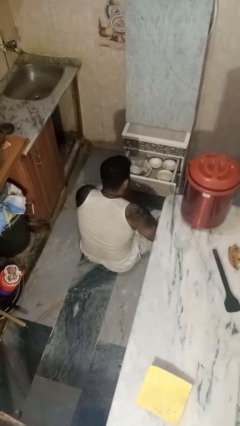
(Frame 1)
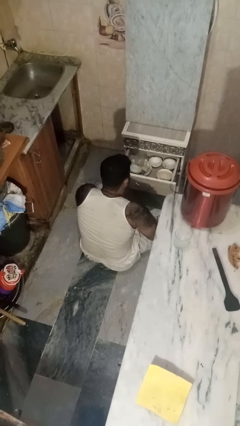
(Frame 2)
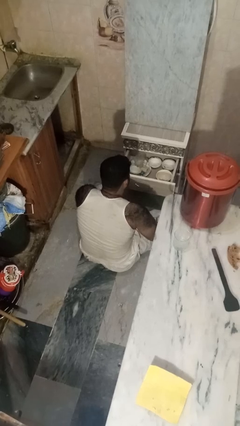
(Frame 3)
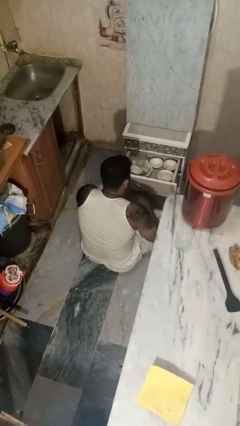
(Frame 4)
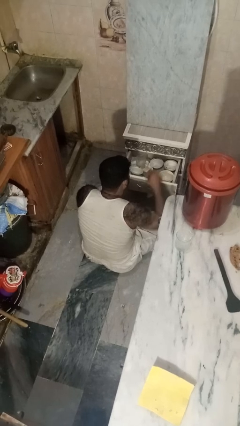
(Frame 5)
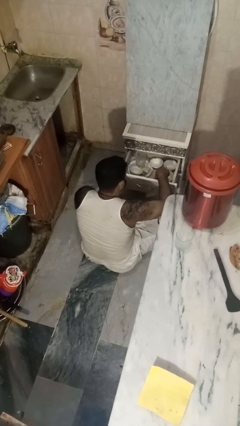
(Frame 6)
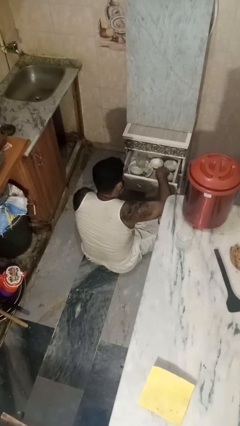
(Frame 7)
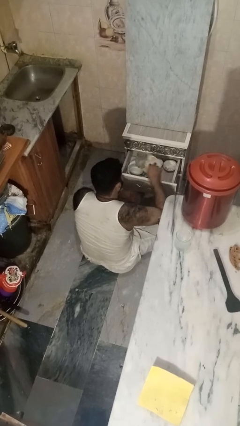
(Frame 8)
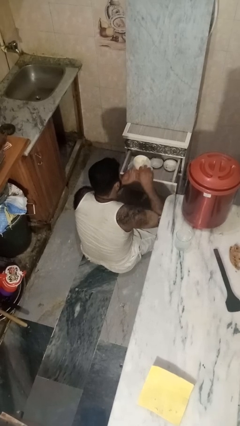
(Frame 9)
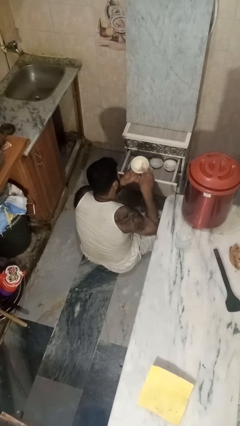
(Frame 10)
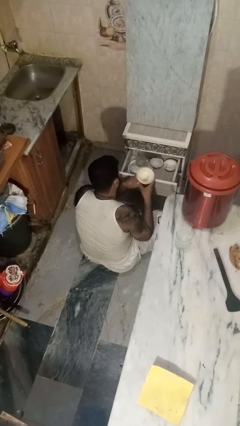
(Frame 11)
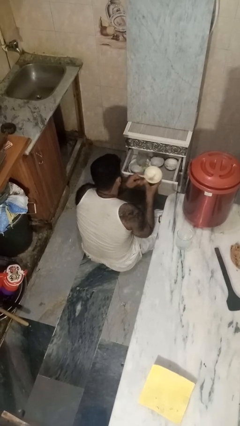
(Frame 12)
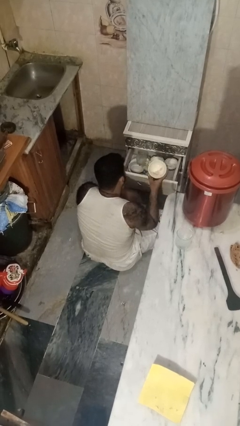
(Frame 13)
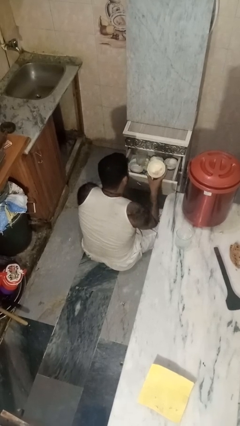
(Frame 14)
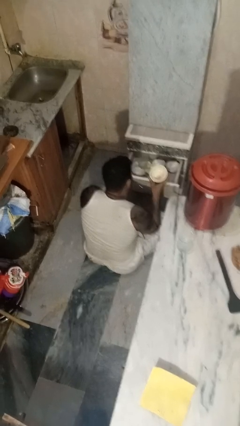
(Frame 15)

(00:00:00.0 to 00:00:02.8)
person takes object from kitchen drawer

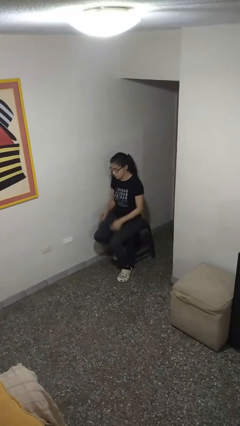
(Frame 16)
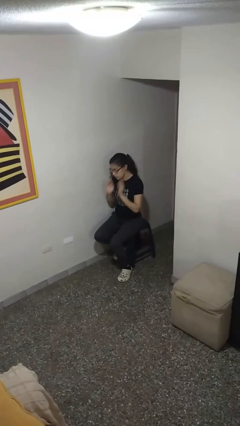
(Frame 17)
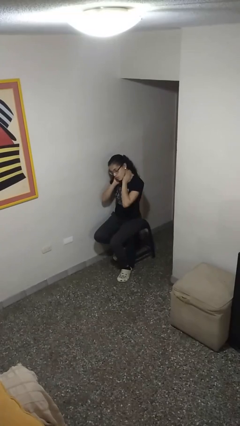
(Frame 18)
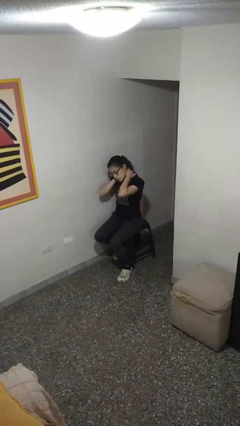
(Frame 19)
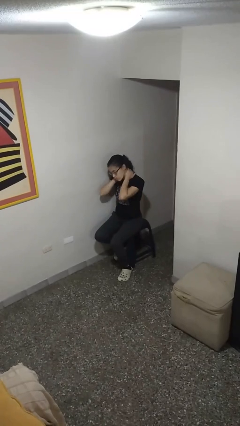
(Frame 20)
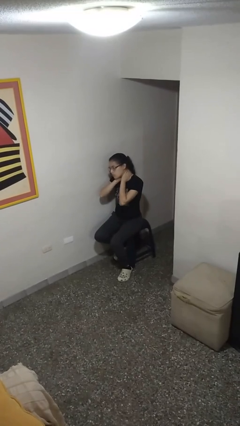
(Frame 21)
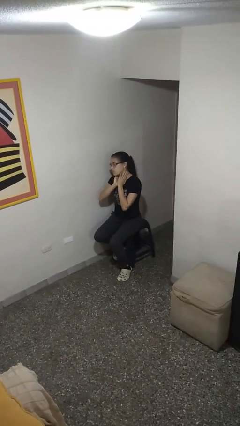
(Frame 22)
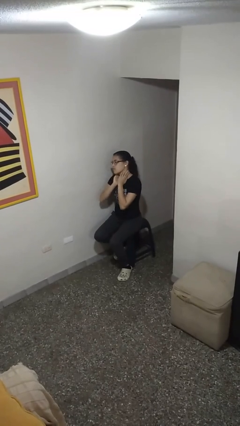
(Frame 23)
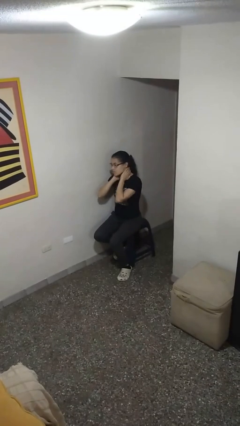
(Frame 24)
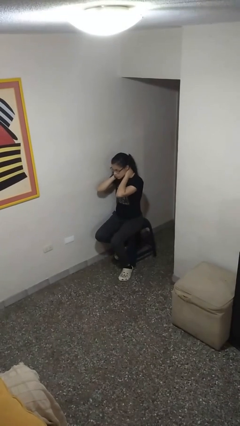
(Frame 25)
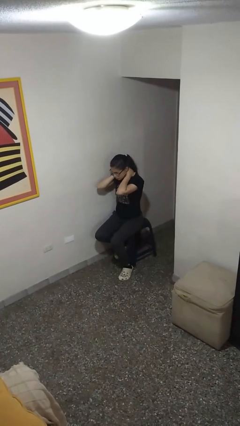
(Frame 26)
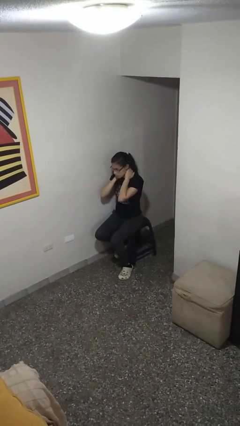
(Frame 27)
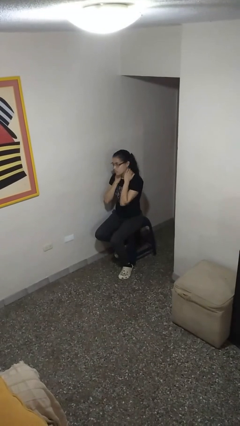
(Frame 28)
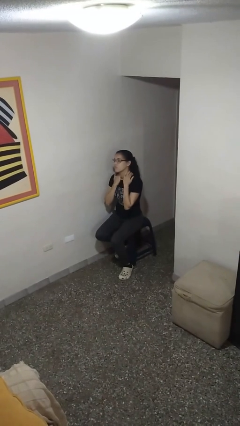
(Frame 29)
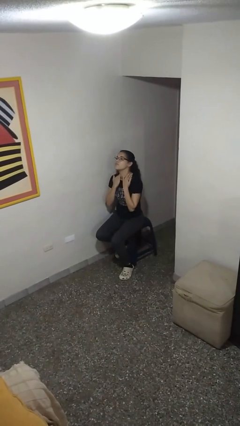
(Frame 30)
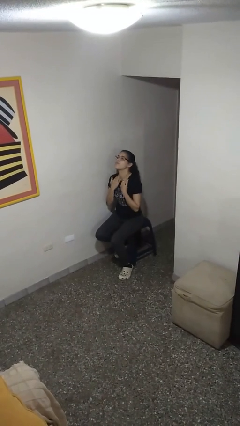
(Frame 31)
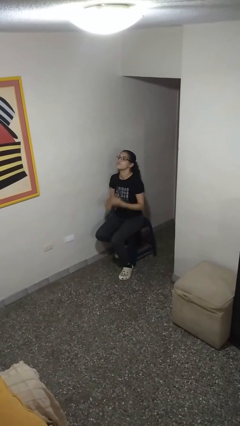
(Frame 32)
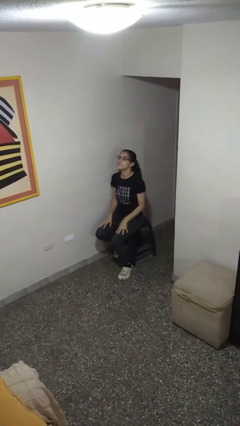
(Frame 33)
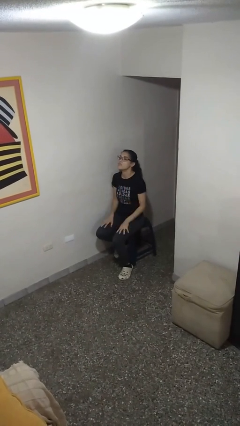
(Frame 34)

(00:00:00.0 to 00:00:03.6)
person rubs neck

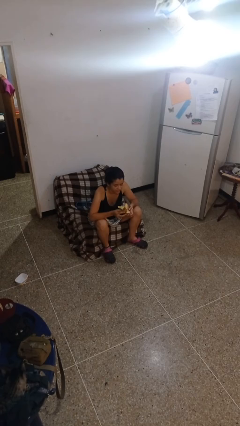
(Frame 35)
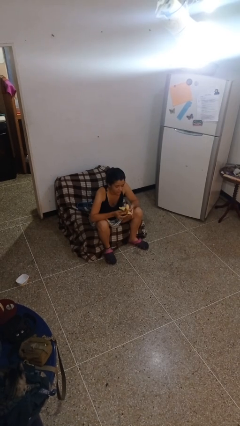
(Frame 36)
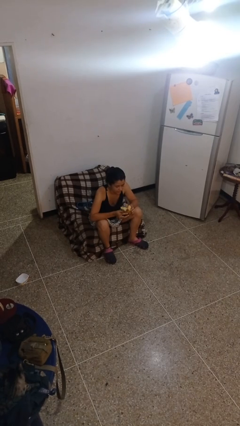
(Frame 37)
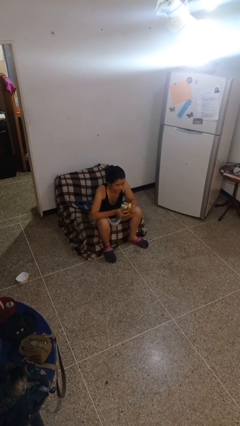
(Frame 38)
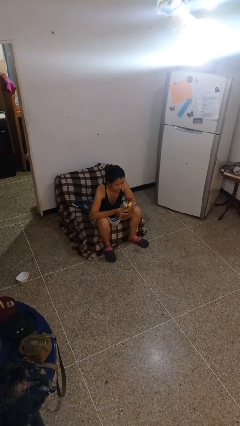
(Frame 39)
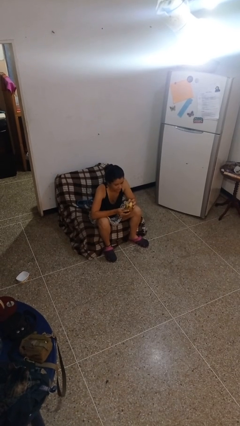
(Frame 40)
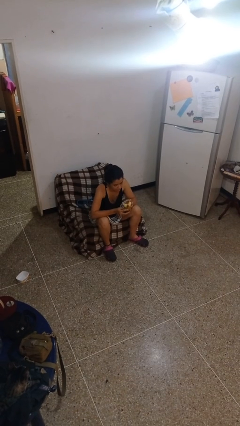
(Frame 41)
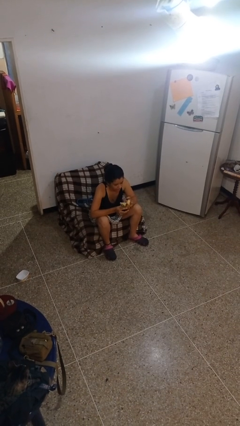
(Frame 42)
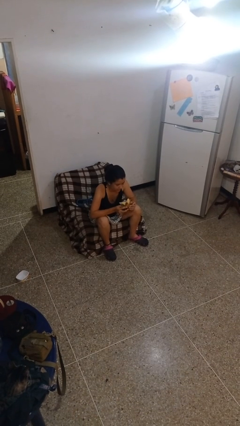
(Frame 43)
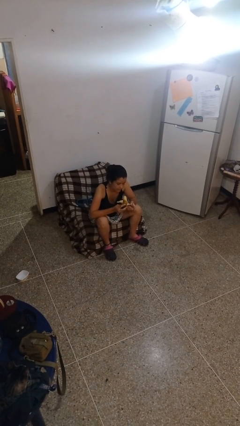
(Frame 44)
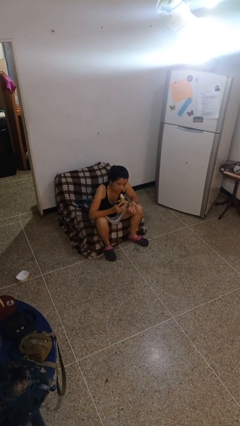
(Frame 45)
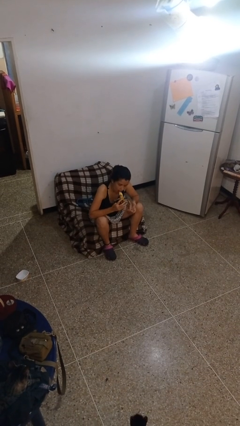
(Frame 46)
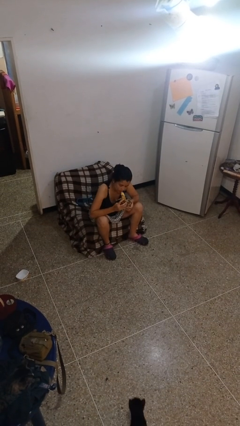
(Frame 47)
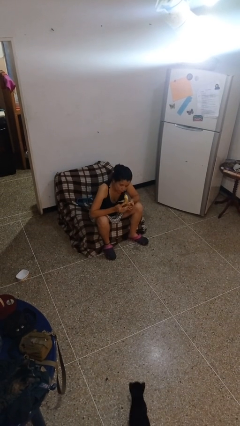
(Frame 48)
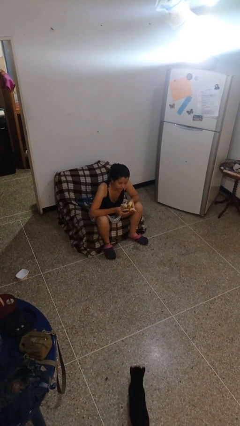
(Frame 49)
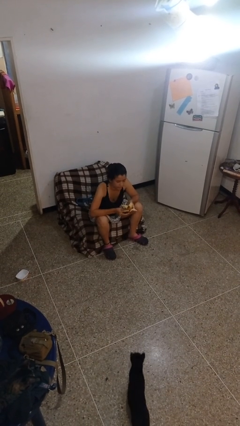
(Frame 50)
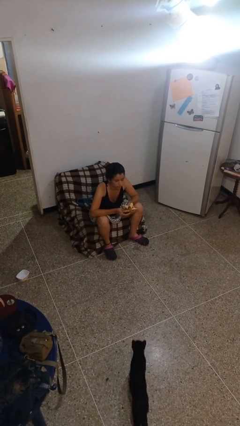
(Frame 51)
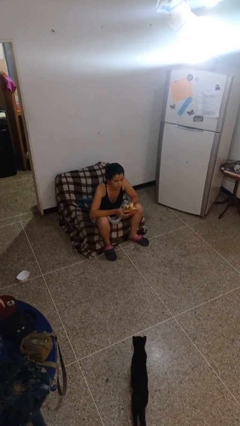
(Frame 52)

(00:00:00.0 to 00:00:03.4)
person eats banana

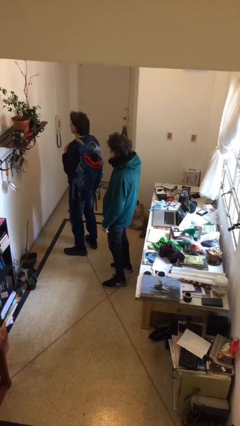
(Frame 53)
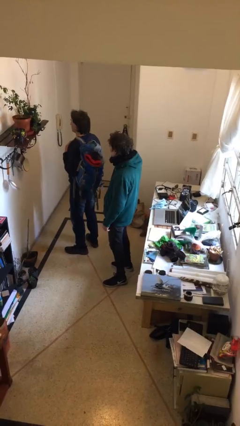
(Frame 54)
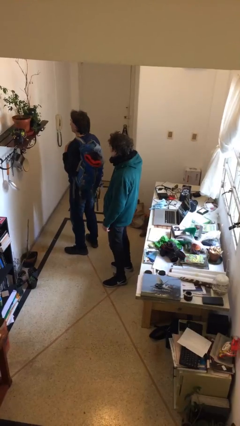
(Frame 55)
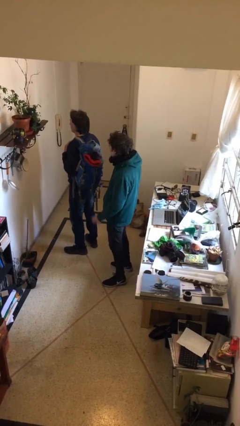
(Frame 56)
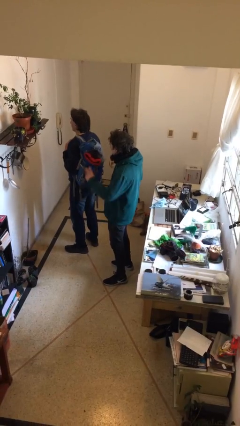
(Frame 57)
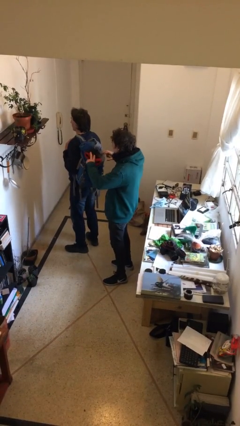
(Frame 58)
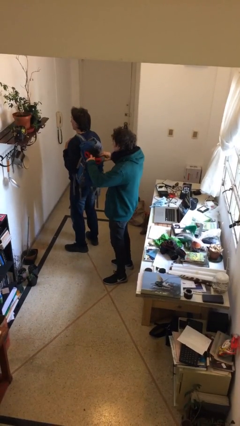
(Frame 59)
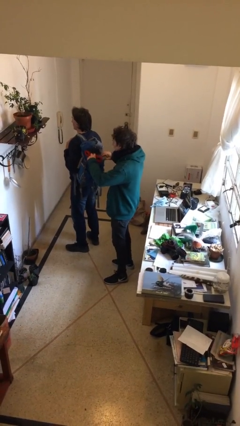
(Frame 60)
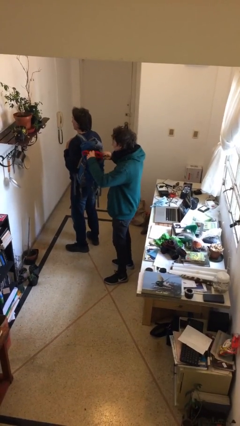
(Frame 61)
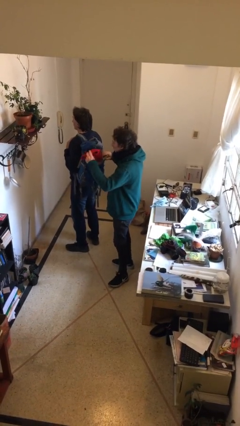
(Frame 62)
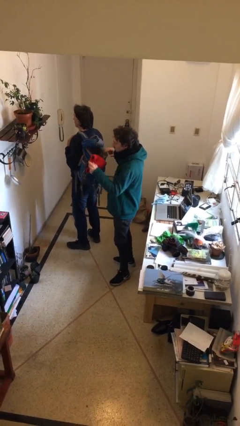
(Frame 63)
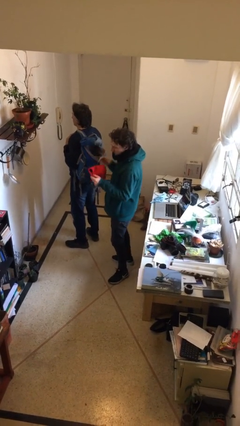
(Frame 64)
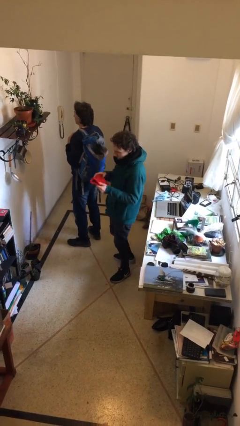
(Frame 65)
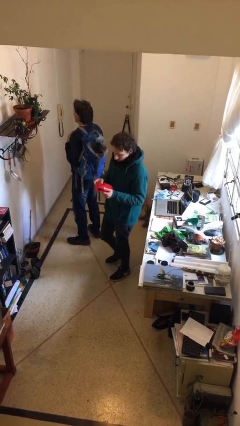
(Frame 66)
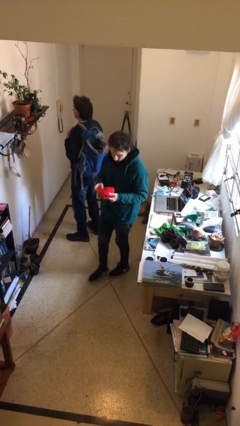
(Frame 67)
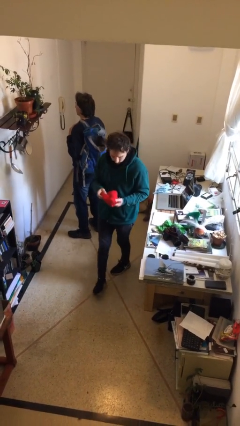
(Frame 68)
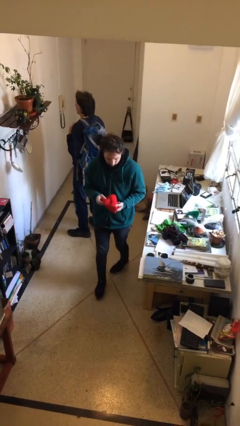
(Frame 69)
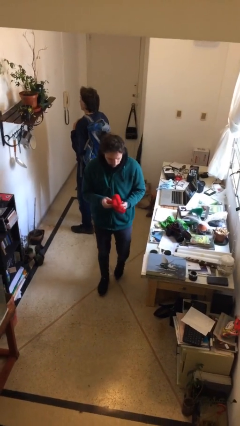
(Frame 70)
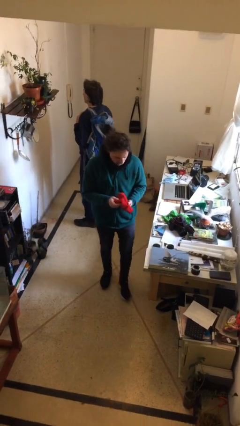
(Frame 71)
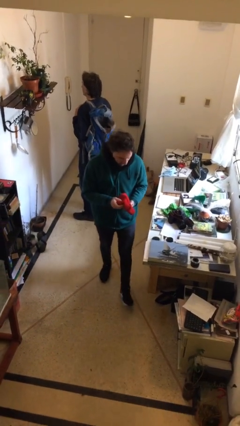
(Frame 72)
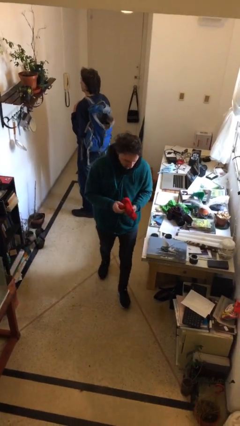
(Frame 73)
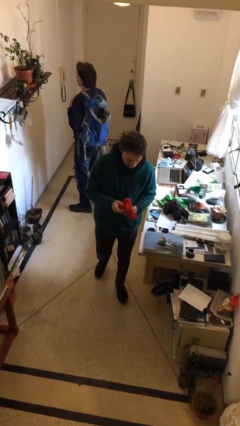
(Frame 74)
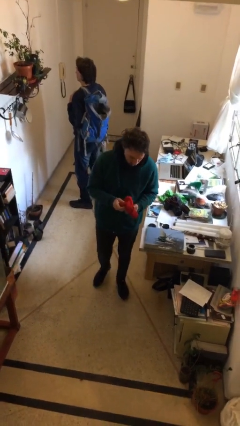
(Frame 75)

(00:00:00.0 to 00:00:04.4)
person steals object from person

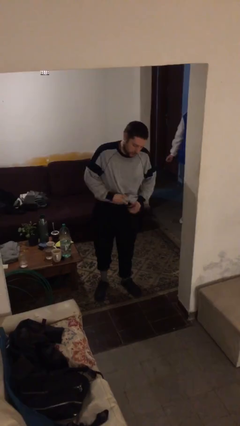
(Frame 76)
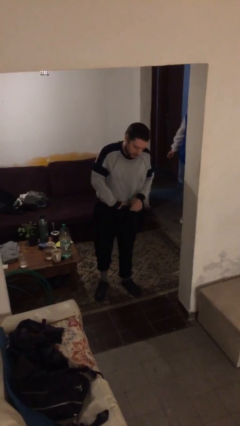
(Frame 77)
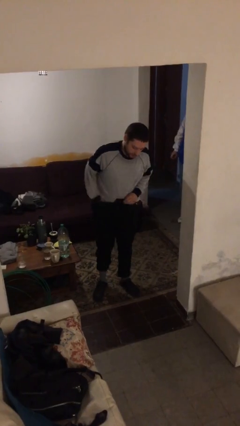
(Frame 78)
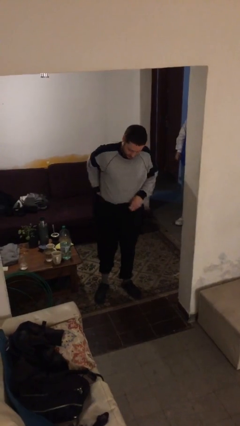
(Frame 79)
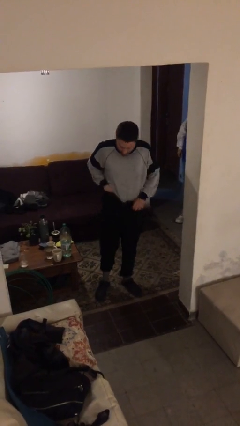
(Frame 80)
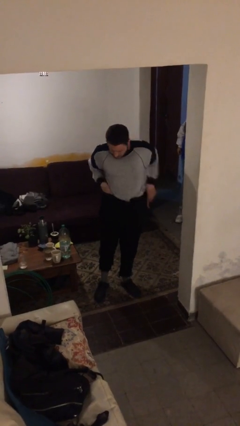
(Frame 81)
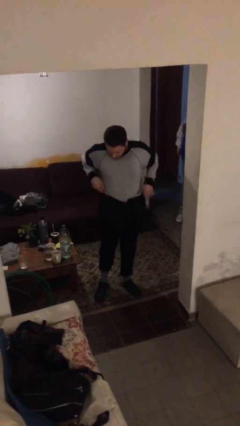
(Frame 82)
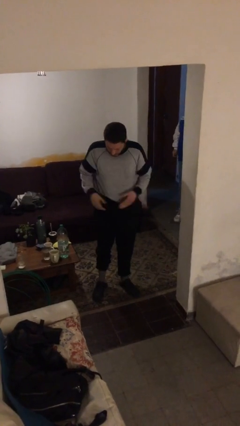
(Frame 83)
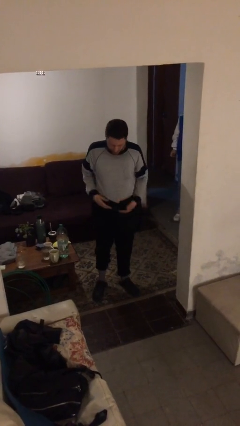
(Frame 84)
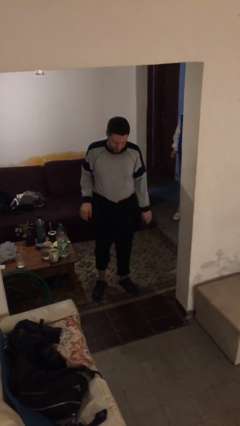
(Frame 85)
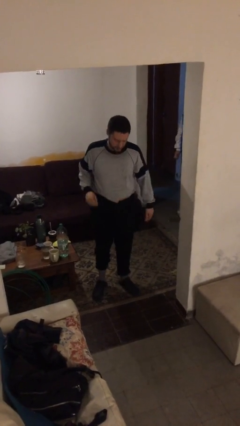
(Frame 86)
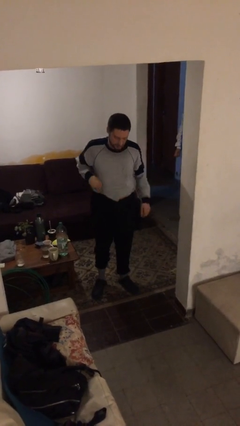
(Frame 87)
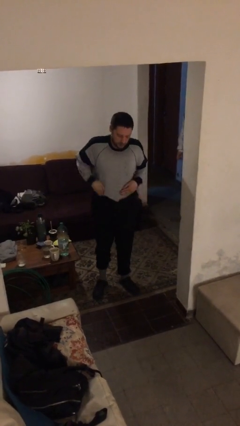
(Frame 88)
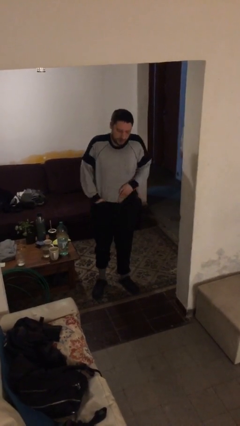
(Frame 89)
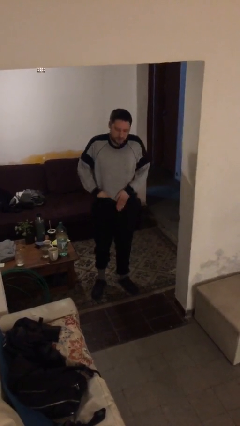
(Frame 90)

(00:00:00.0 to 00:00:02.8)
person tucks in shirt

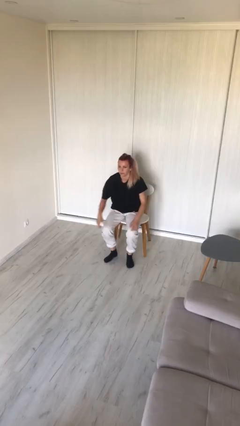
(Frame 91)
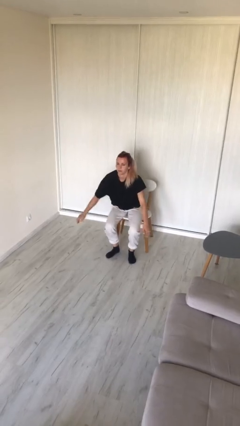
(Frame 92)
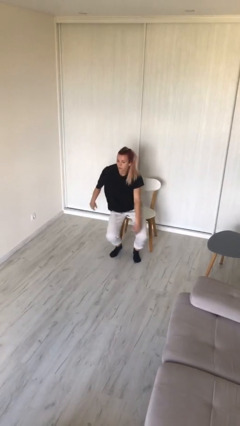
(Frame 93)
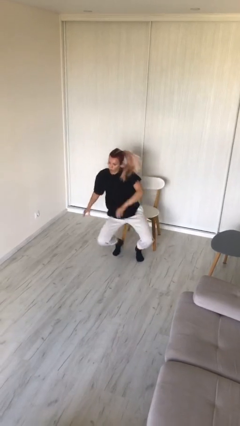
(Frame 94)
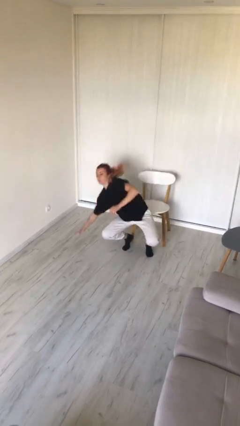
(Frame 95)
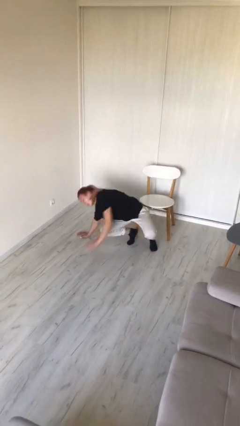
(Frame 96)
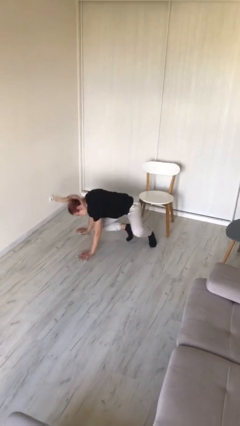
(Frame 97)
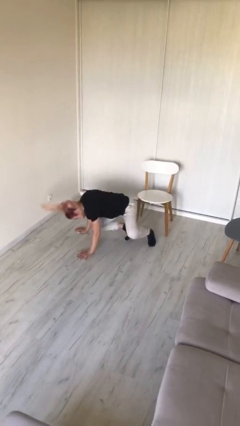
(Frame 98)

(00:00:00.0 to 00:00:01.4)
person falls from chair